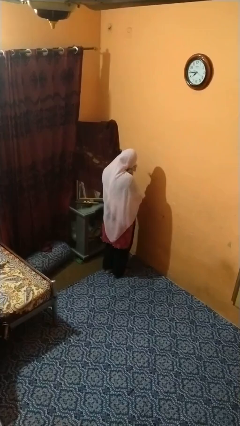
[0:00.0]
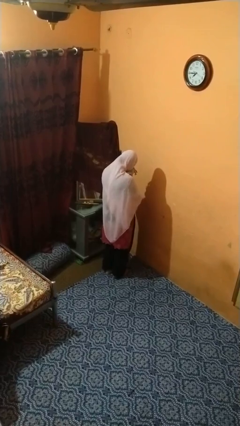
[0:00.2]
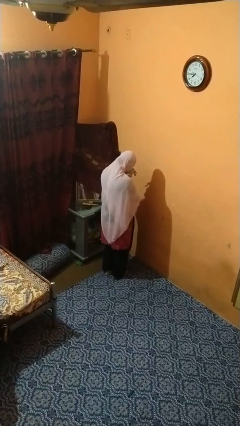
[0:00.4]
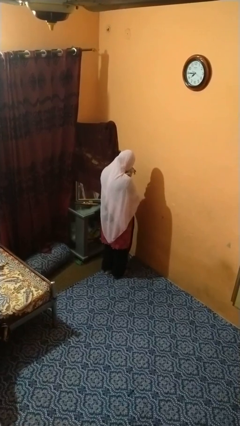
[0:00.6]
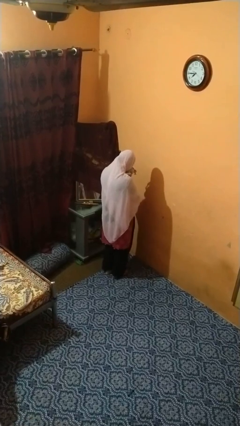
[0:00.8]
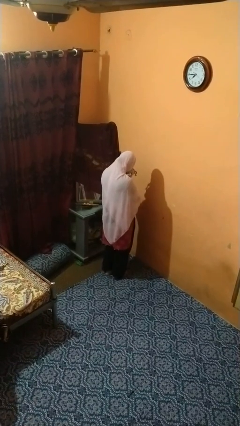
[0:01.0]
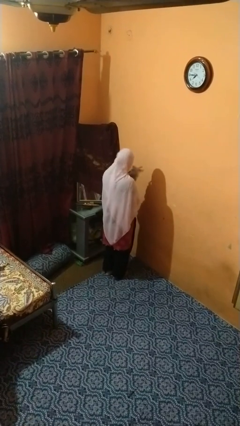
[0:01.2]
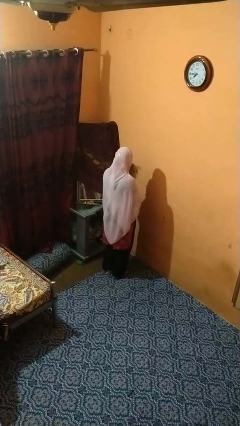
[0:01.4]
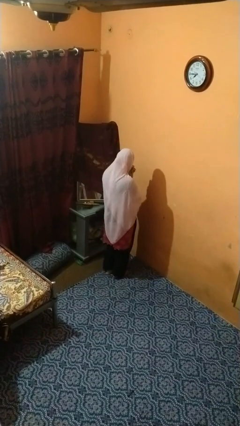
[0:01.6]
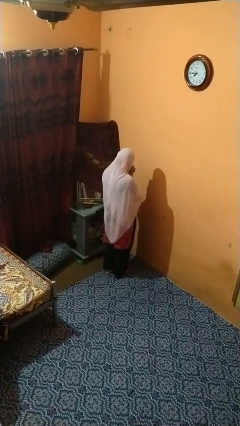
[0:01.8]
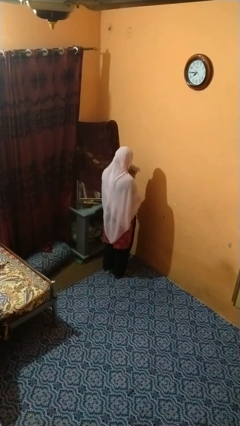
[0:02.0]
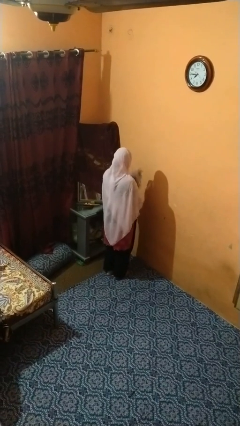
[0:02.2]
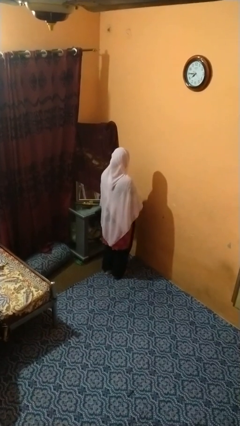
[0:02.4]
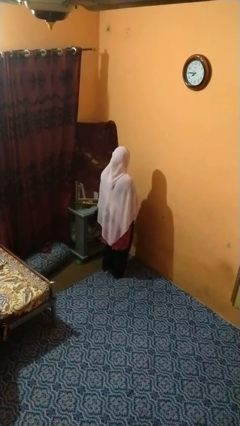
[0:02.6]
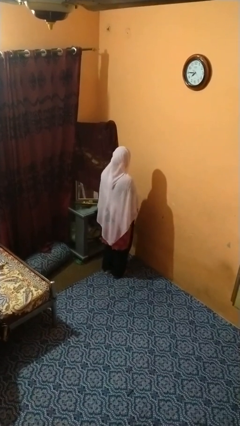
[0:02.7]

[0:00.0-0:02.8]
person hugs stuffed animal

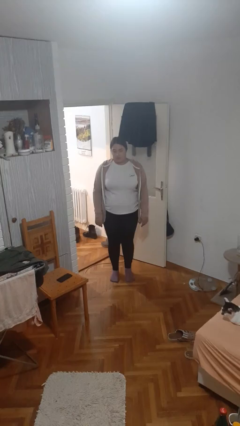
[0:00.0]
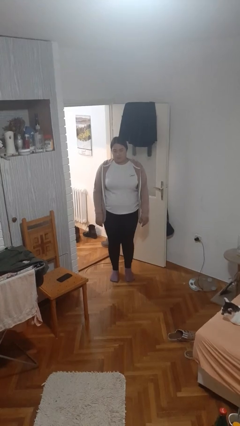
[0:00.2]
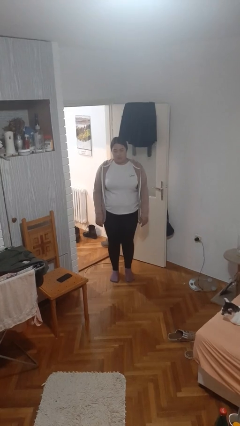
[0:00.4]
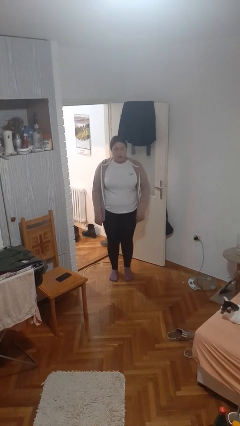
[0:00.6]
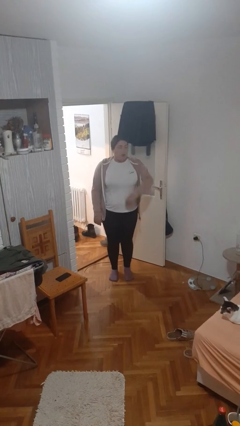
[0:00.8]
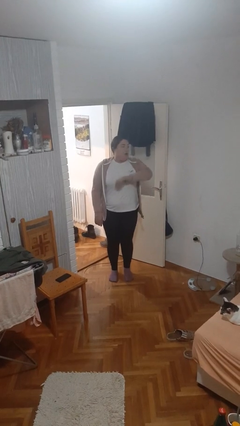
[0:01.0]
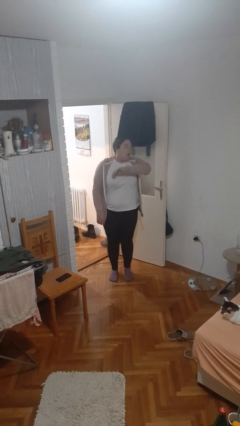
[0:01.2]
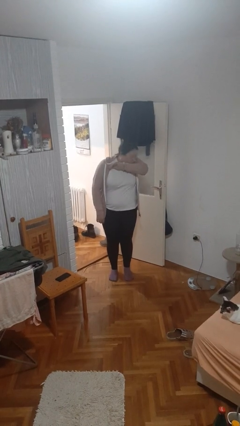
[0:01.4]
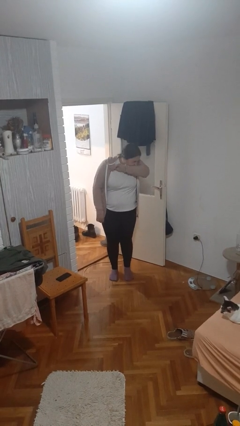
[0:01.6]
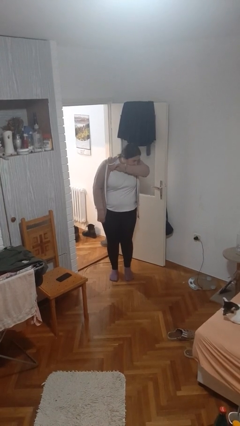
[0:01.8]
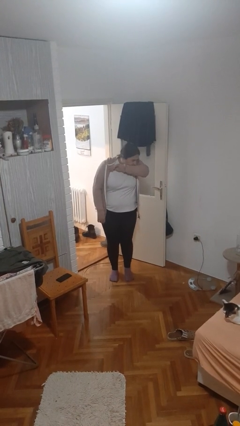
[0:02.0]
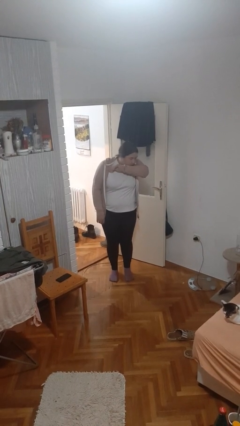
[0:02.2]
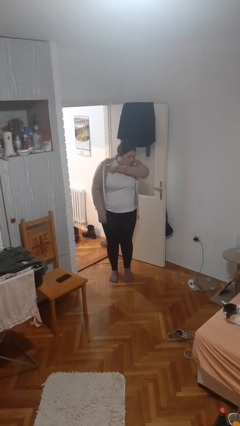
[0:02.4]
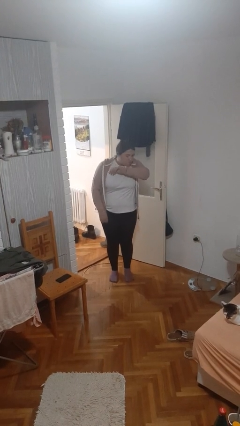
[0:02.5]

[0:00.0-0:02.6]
person sneezes into arm

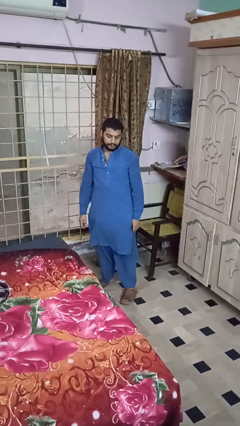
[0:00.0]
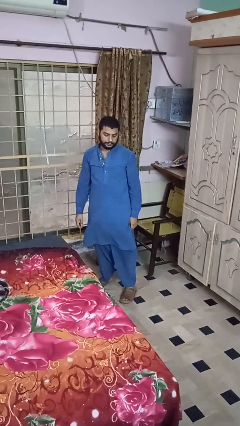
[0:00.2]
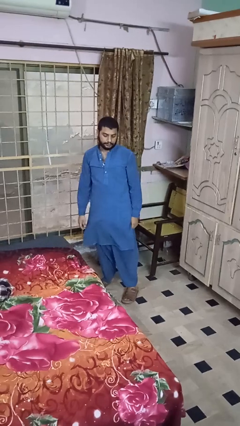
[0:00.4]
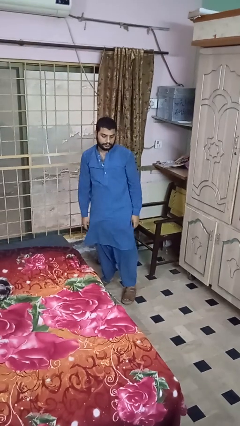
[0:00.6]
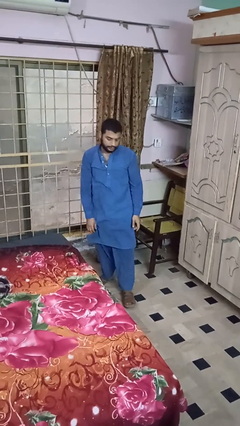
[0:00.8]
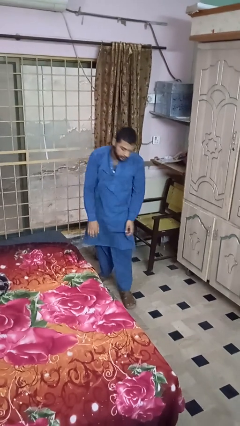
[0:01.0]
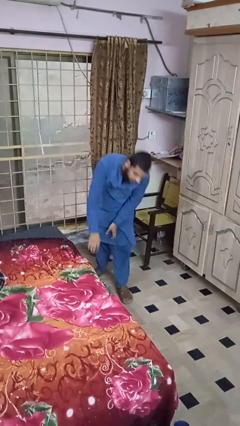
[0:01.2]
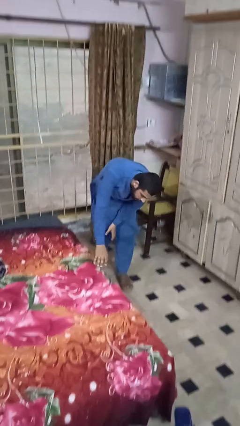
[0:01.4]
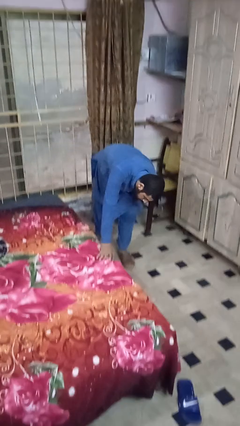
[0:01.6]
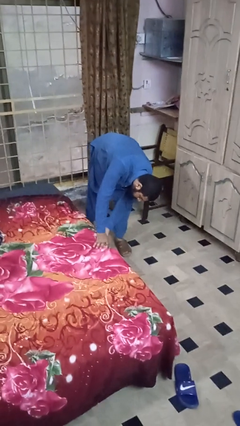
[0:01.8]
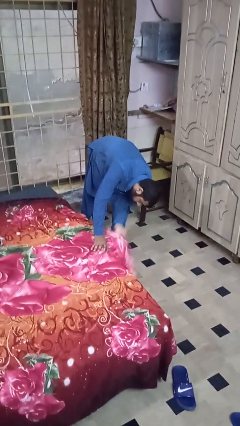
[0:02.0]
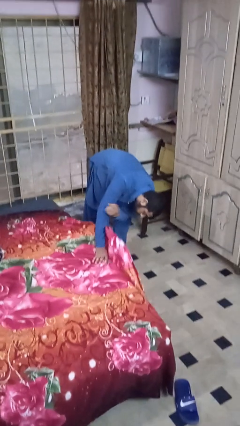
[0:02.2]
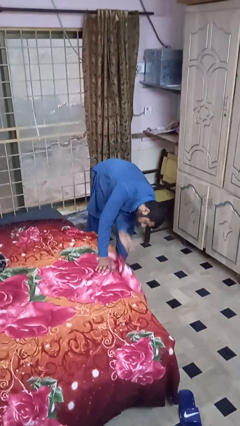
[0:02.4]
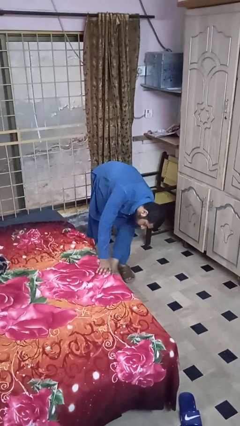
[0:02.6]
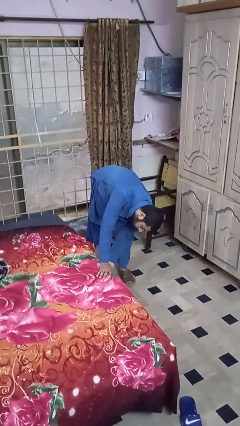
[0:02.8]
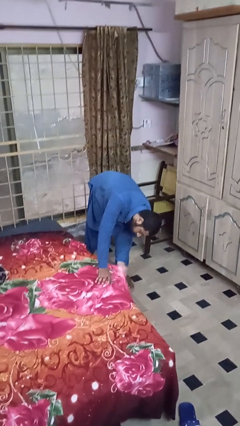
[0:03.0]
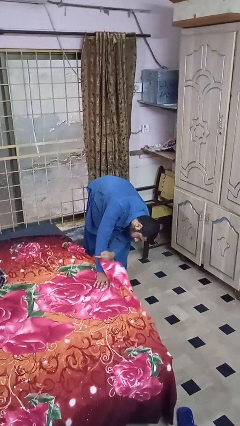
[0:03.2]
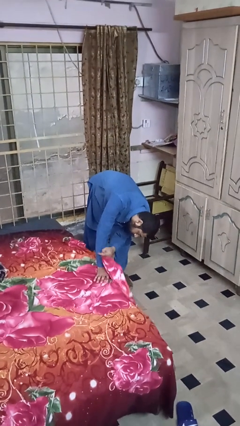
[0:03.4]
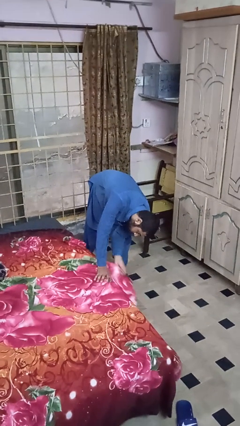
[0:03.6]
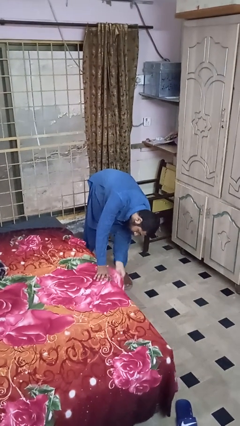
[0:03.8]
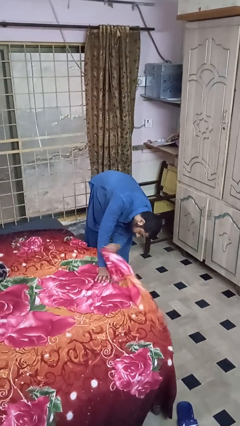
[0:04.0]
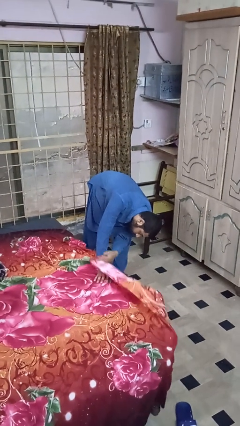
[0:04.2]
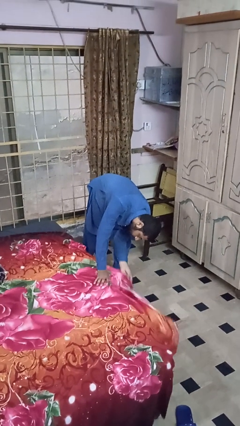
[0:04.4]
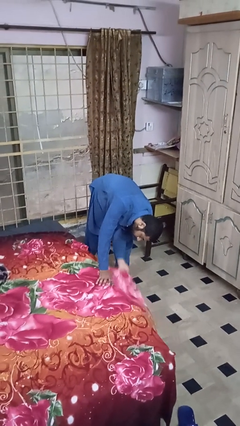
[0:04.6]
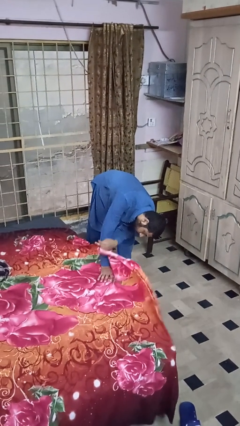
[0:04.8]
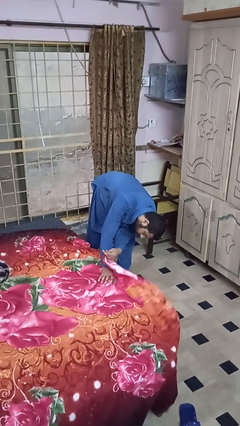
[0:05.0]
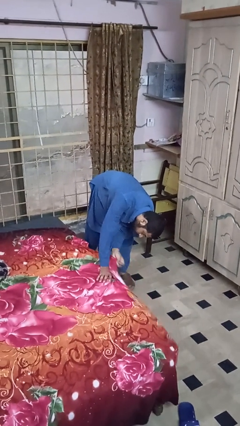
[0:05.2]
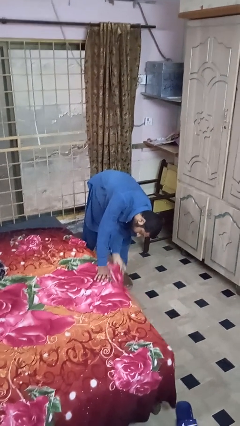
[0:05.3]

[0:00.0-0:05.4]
person searches under bed

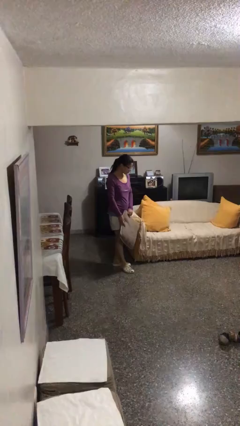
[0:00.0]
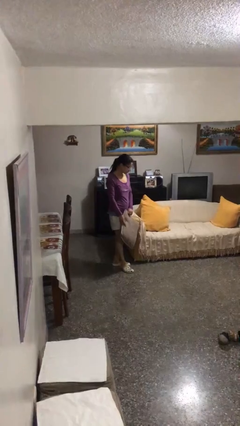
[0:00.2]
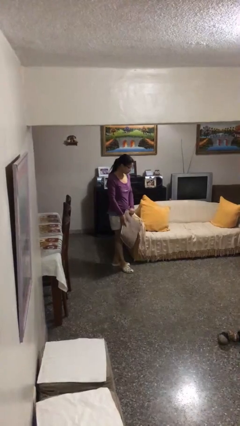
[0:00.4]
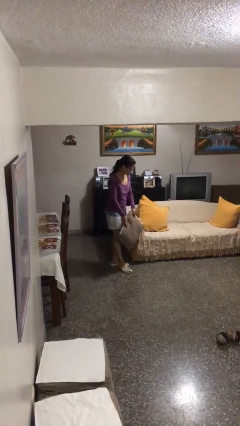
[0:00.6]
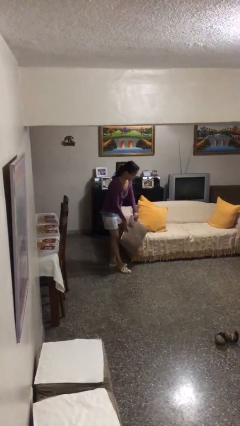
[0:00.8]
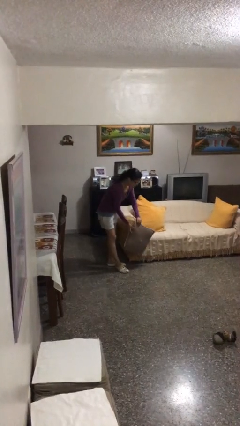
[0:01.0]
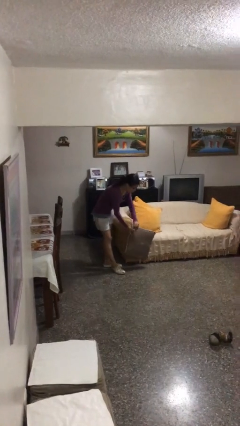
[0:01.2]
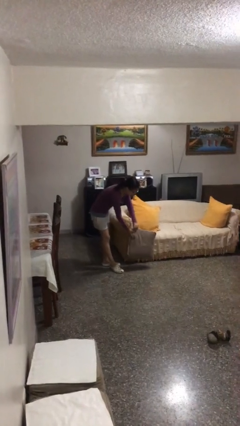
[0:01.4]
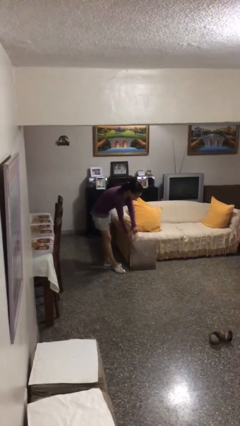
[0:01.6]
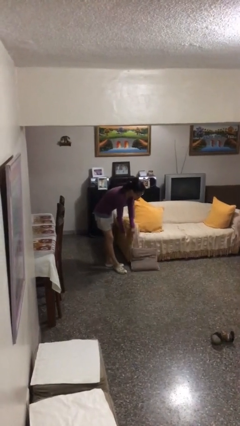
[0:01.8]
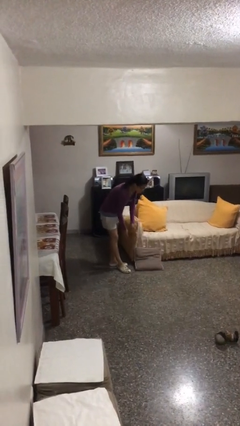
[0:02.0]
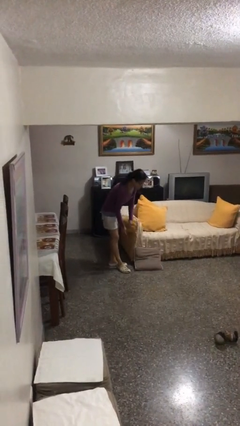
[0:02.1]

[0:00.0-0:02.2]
person puts down object on floor

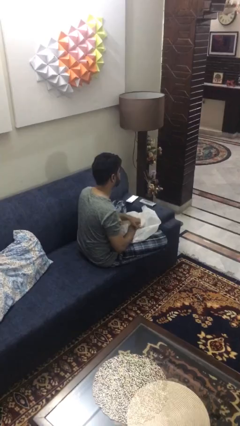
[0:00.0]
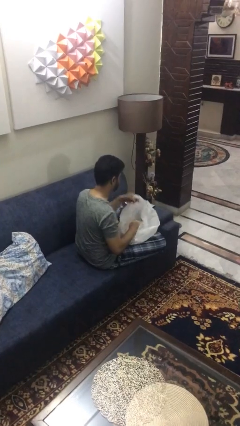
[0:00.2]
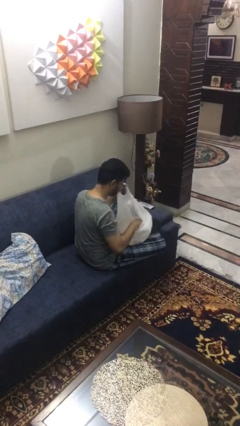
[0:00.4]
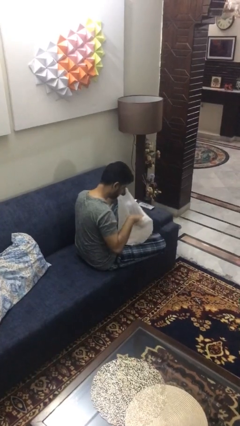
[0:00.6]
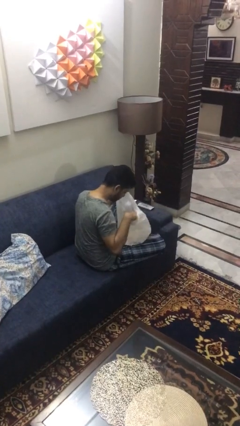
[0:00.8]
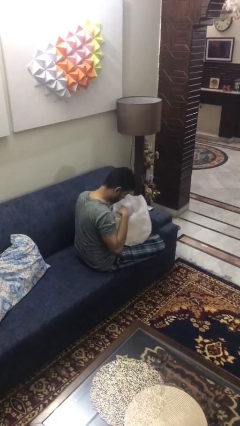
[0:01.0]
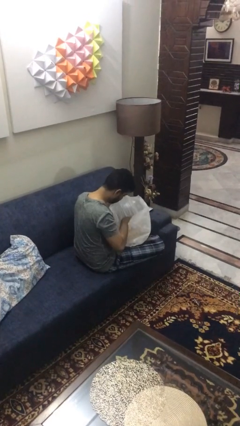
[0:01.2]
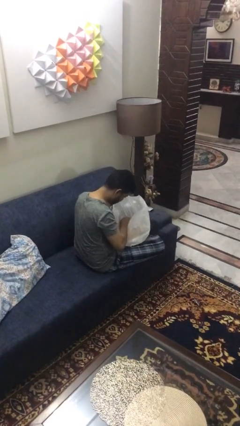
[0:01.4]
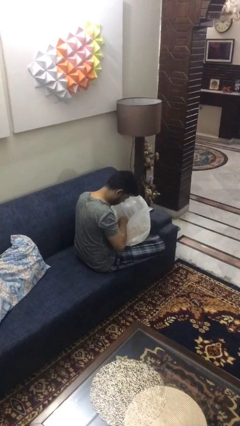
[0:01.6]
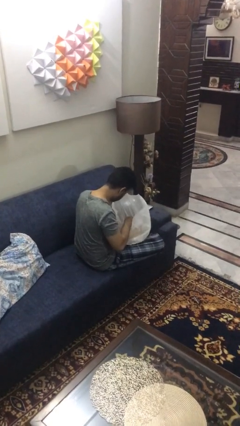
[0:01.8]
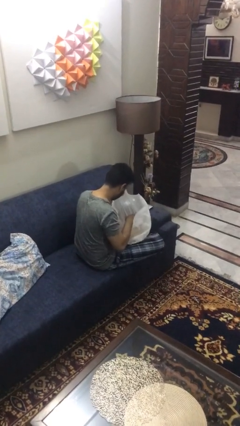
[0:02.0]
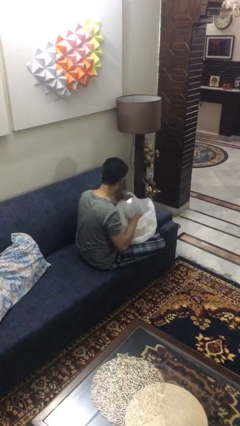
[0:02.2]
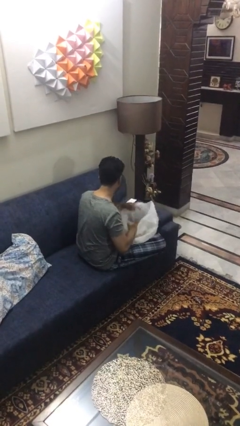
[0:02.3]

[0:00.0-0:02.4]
person searches in bag

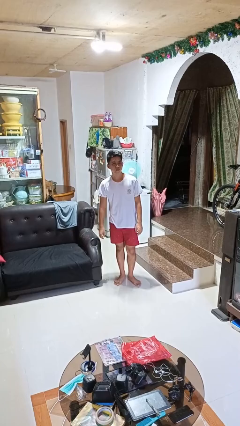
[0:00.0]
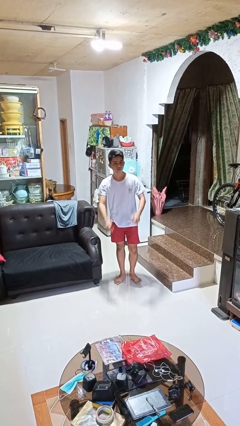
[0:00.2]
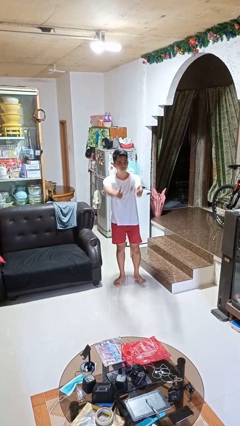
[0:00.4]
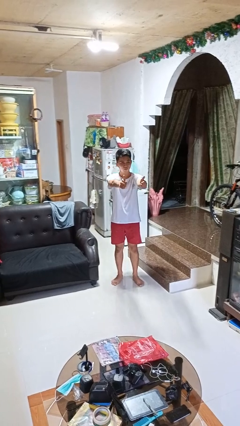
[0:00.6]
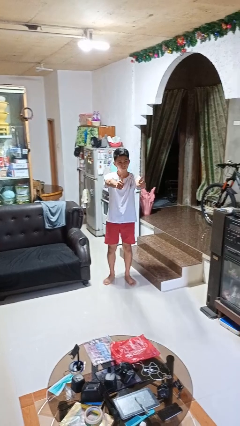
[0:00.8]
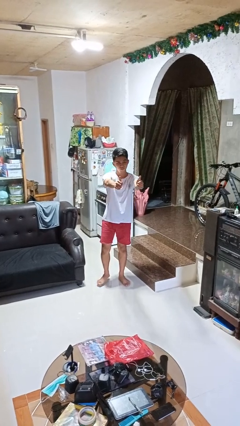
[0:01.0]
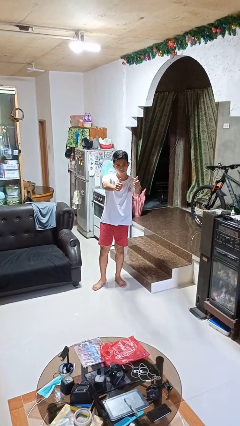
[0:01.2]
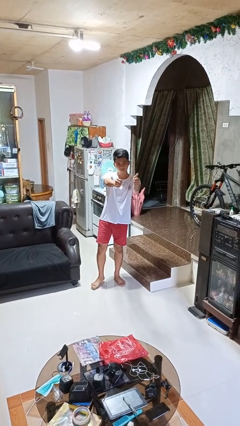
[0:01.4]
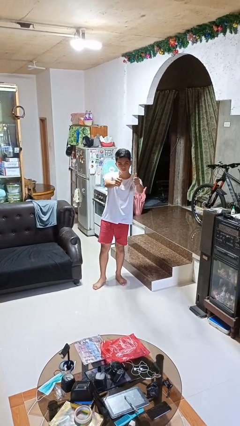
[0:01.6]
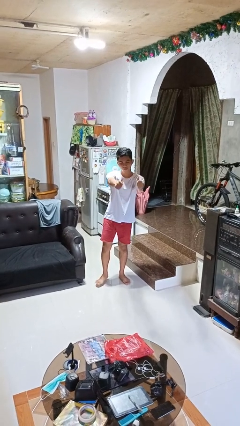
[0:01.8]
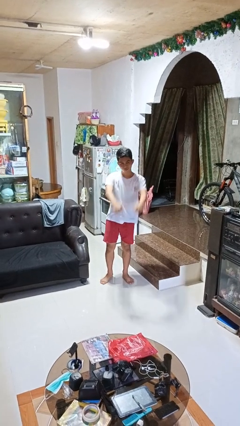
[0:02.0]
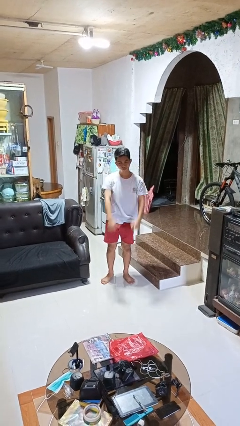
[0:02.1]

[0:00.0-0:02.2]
person gestures thumbs up
